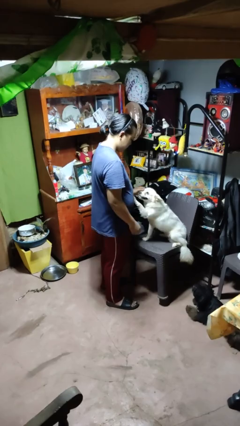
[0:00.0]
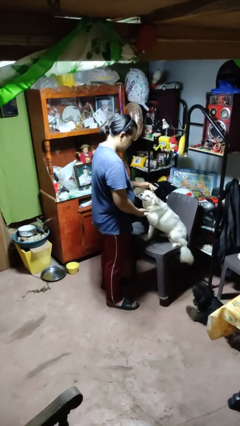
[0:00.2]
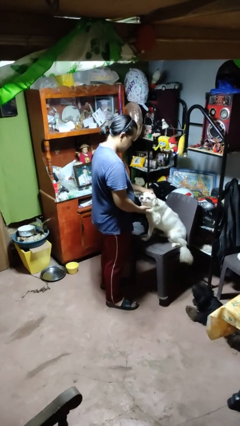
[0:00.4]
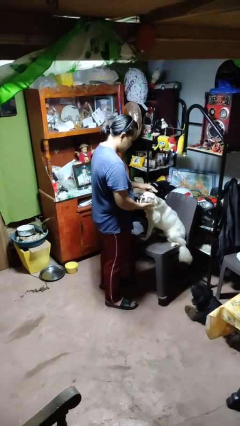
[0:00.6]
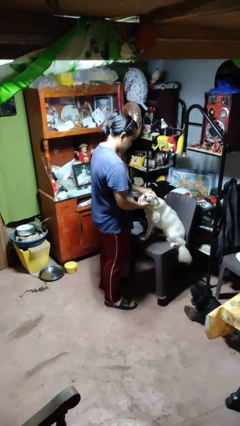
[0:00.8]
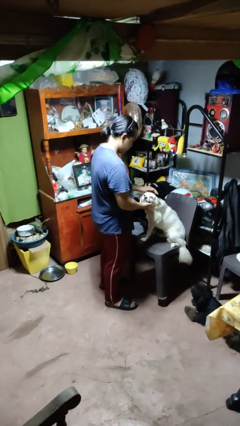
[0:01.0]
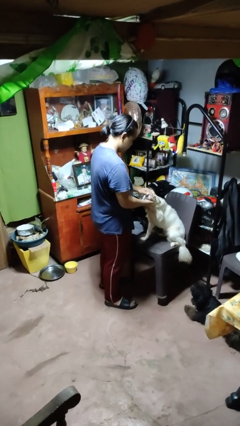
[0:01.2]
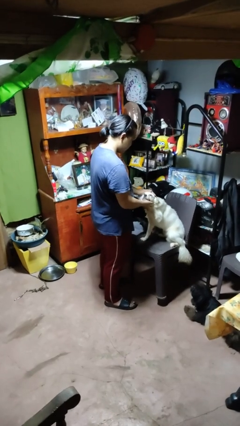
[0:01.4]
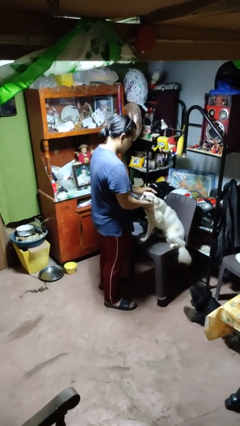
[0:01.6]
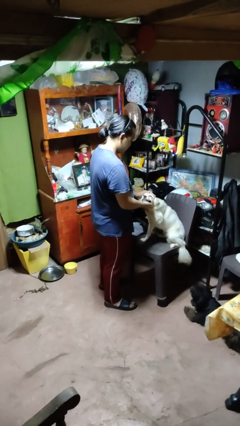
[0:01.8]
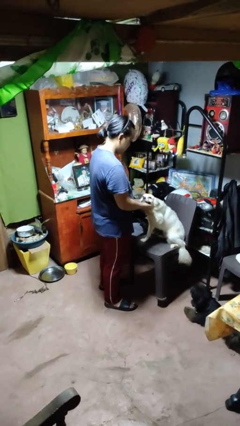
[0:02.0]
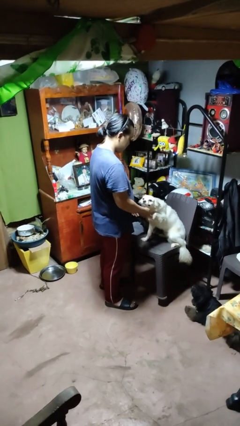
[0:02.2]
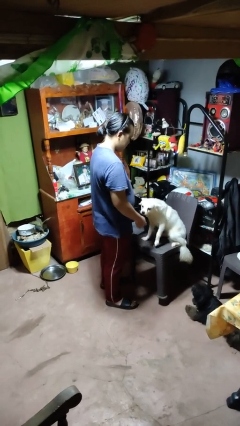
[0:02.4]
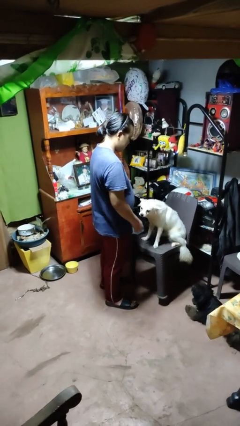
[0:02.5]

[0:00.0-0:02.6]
person pets dog

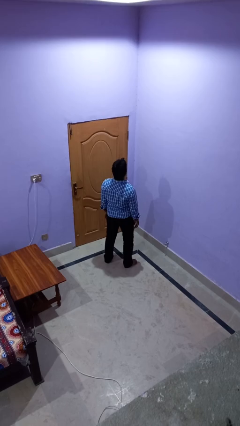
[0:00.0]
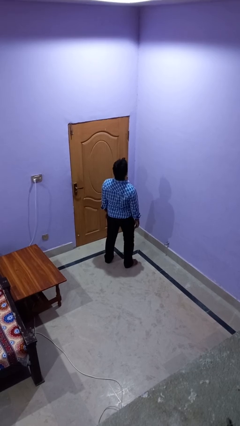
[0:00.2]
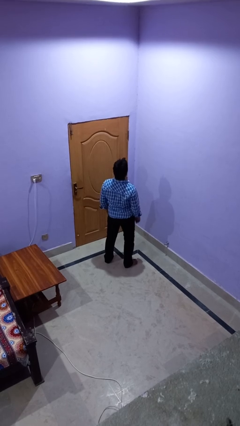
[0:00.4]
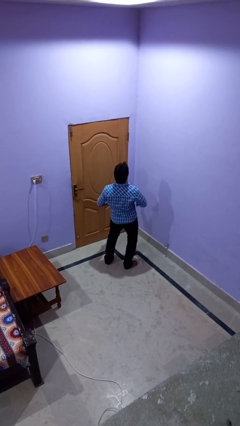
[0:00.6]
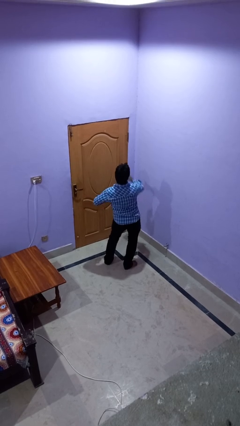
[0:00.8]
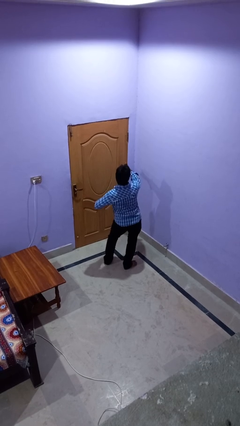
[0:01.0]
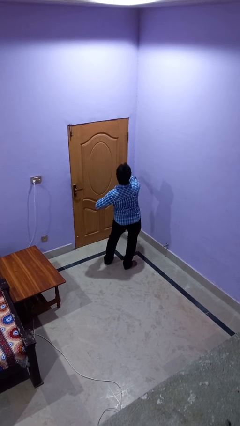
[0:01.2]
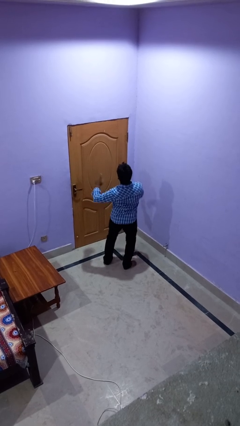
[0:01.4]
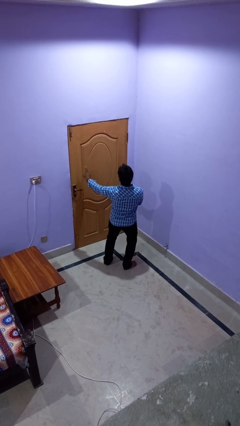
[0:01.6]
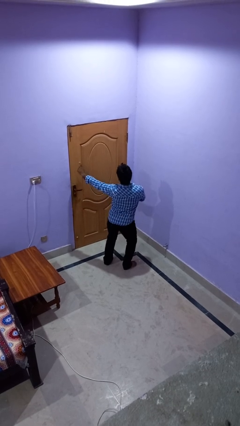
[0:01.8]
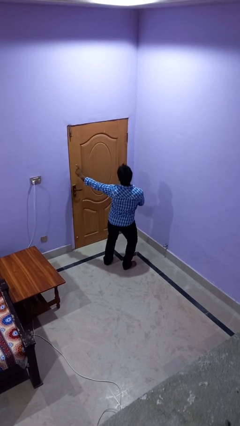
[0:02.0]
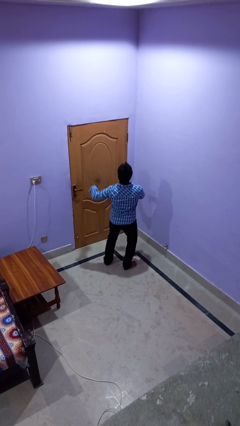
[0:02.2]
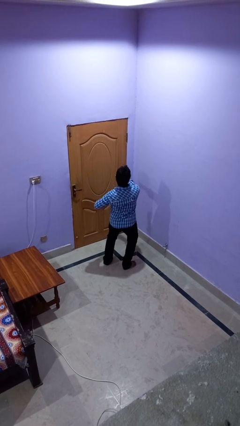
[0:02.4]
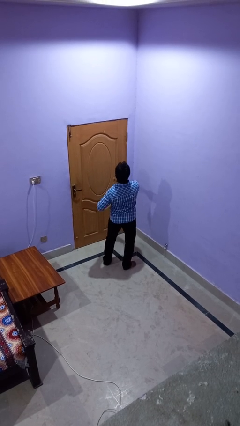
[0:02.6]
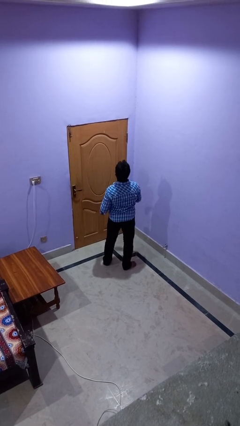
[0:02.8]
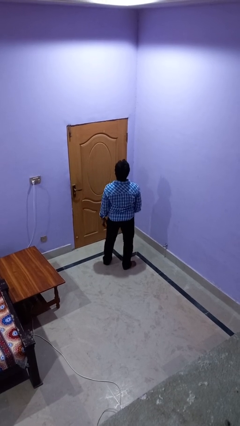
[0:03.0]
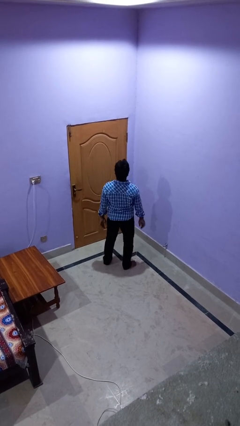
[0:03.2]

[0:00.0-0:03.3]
person dances in place

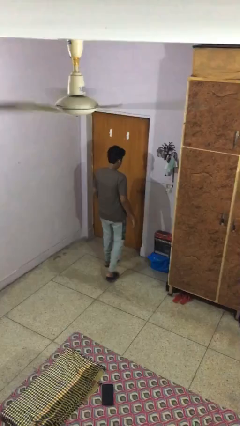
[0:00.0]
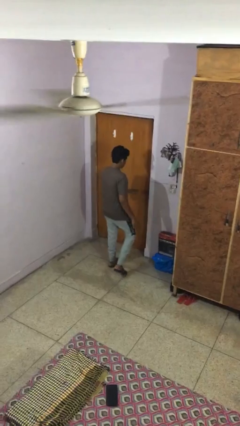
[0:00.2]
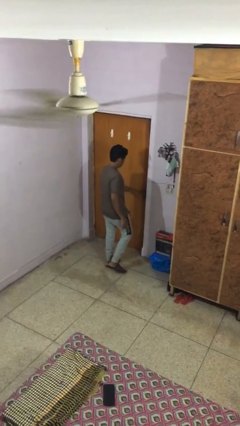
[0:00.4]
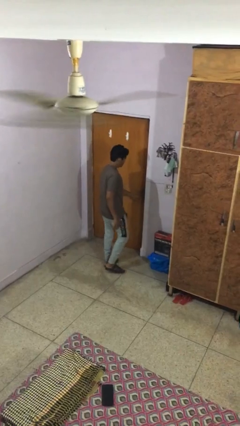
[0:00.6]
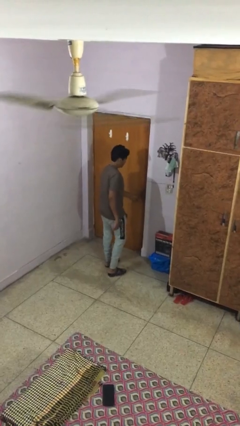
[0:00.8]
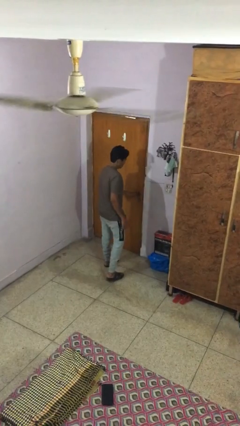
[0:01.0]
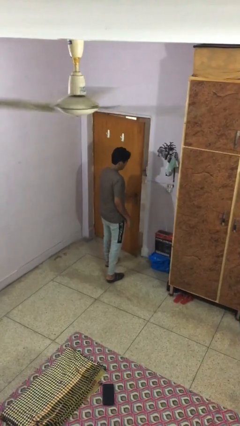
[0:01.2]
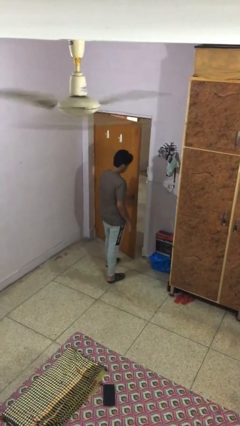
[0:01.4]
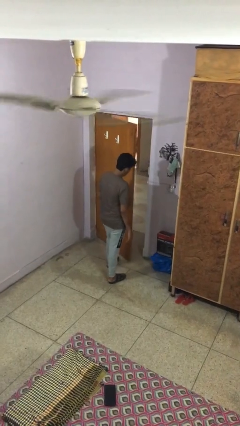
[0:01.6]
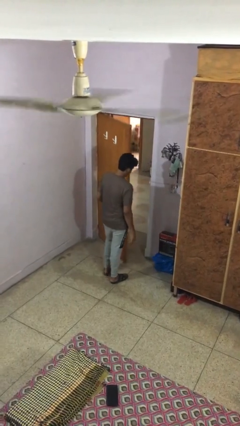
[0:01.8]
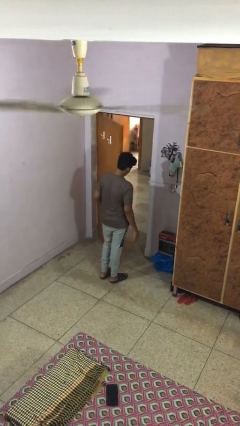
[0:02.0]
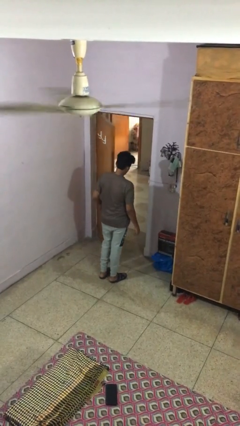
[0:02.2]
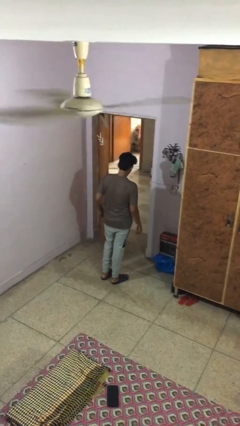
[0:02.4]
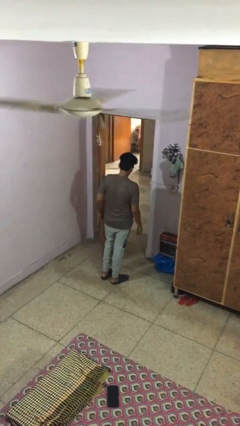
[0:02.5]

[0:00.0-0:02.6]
person opens facility door

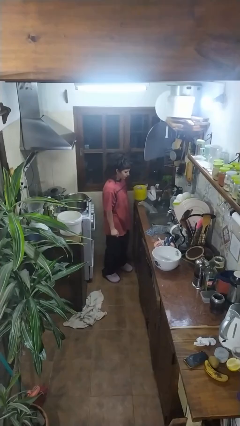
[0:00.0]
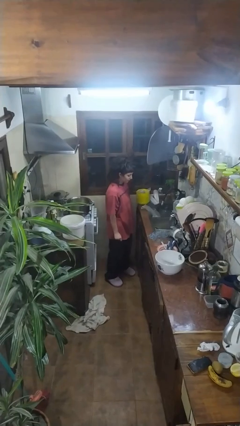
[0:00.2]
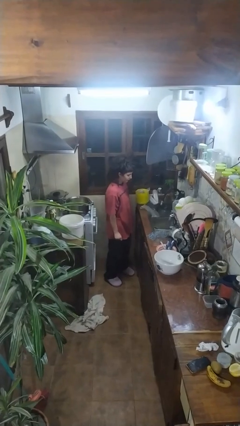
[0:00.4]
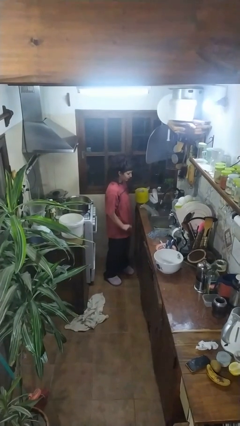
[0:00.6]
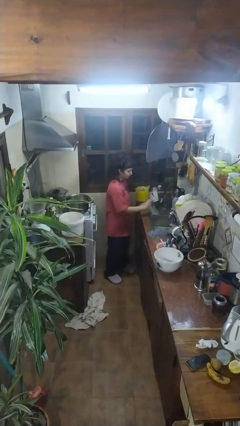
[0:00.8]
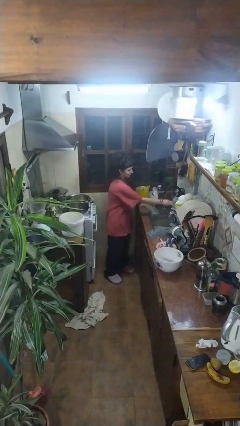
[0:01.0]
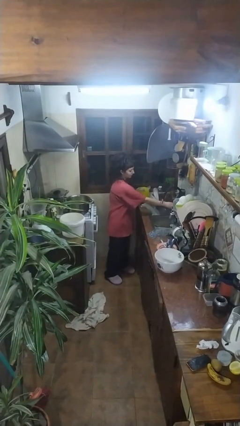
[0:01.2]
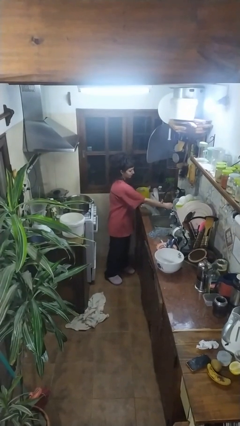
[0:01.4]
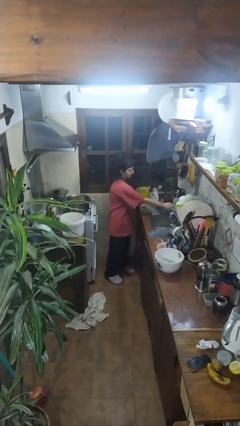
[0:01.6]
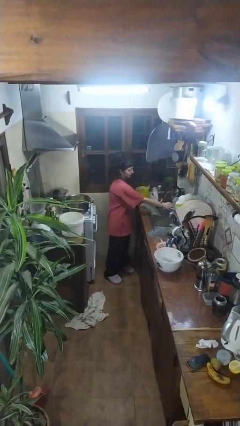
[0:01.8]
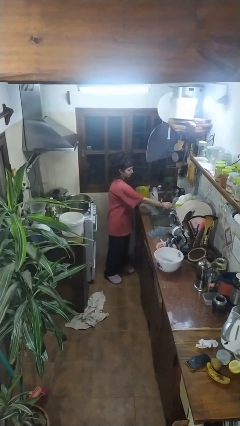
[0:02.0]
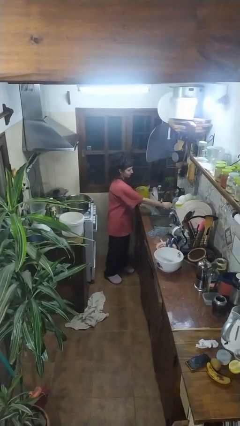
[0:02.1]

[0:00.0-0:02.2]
person turns on faucet

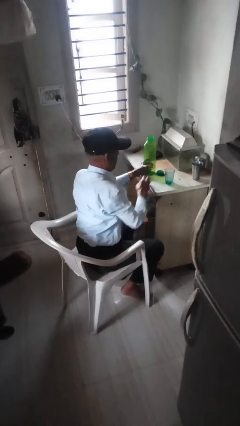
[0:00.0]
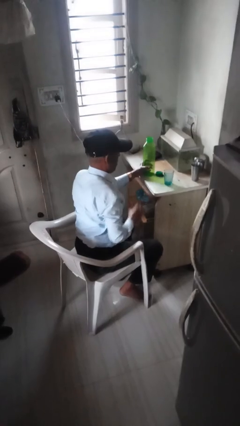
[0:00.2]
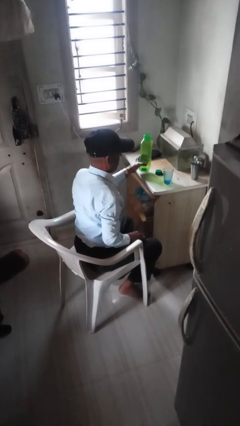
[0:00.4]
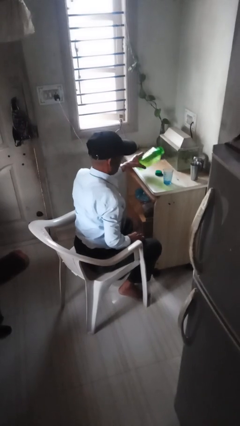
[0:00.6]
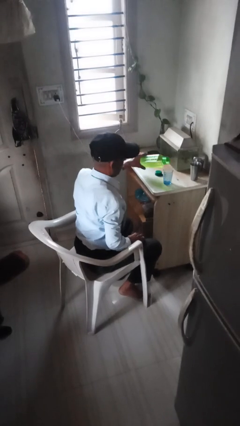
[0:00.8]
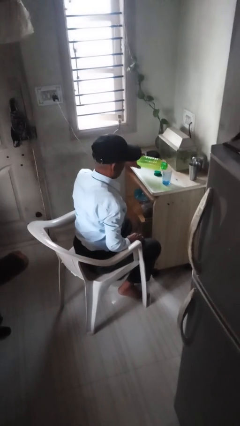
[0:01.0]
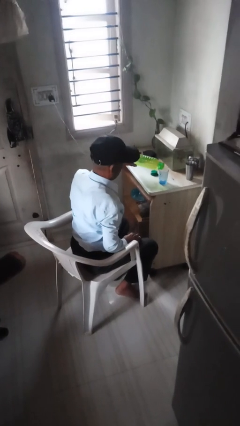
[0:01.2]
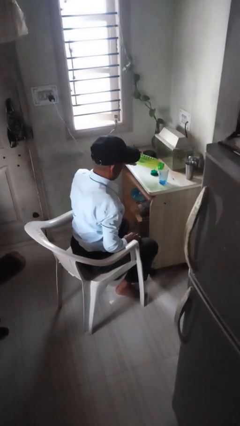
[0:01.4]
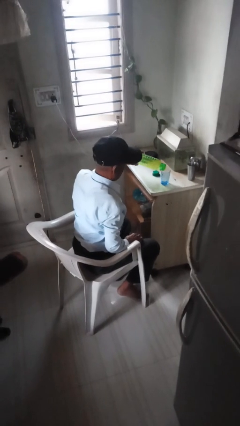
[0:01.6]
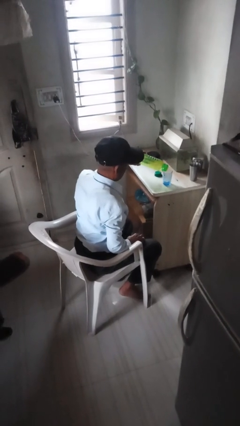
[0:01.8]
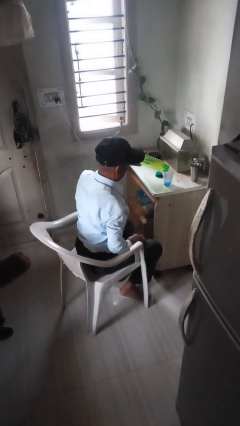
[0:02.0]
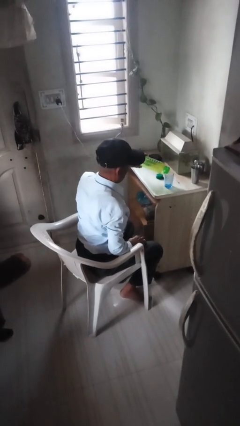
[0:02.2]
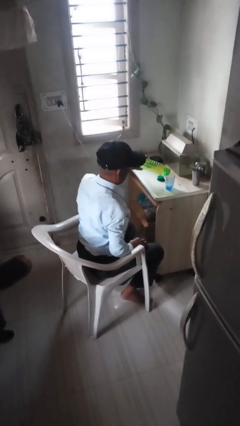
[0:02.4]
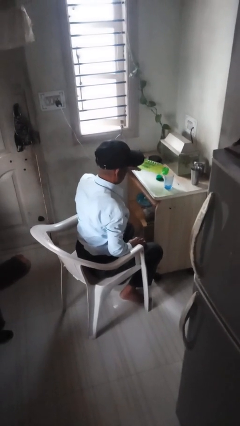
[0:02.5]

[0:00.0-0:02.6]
person pours liquid into cup

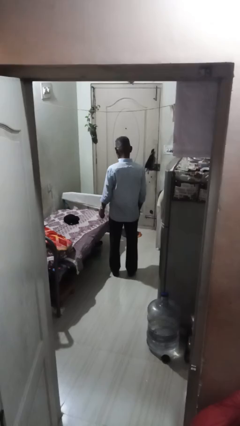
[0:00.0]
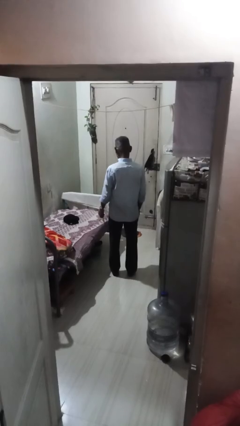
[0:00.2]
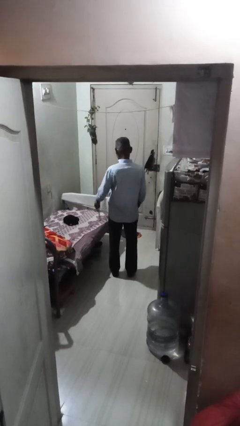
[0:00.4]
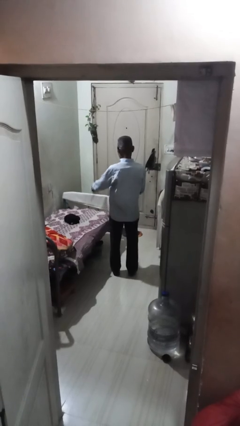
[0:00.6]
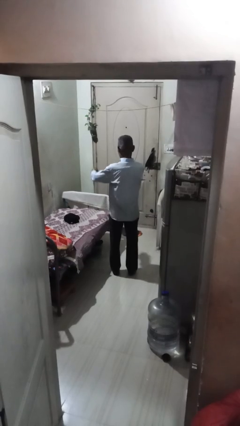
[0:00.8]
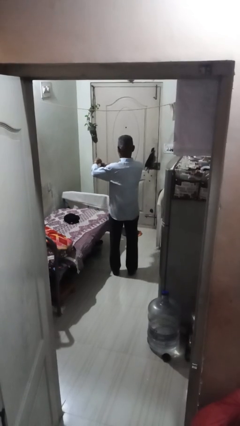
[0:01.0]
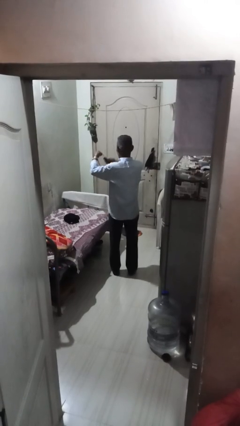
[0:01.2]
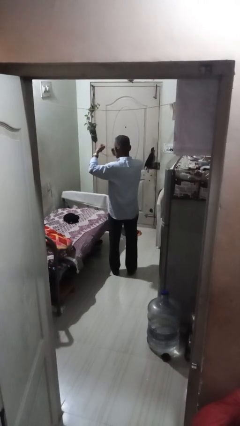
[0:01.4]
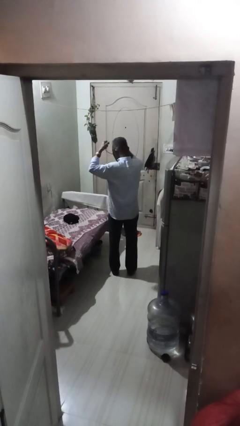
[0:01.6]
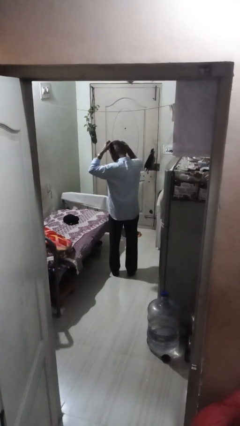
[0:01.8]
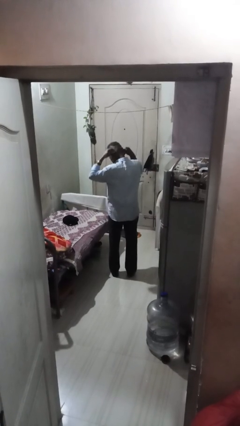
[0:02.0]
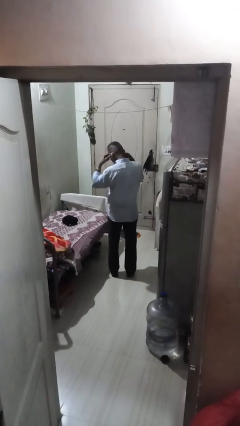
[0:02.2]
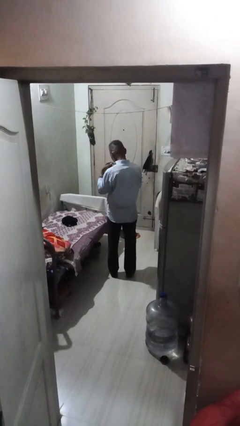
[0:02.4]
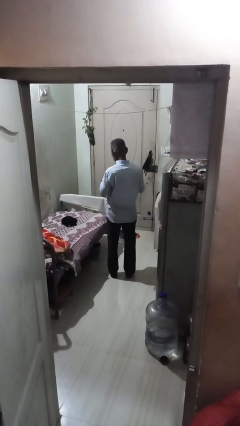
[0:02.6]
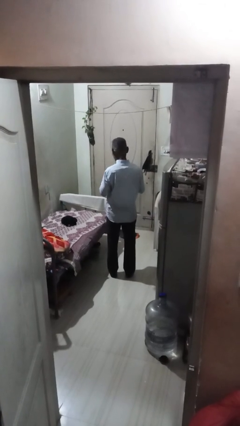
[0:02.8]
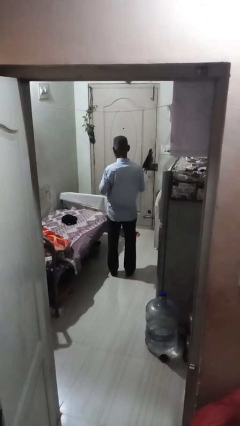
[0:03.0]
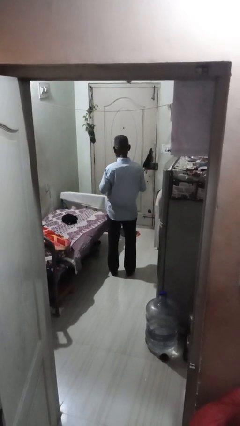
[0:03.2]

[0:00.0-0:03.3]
person puts on necklace

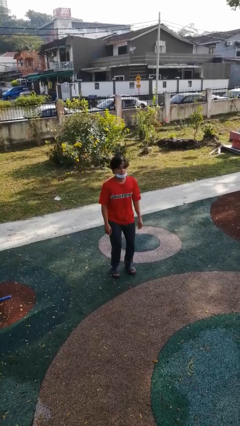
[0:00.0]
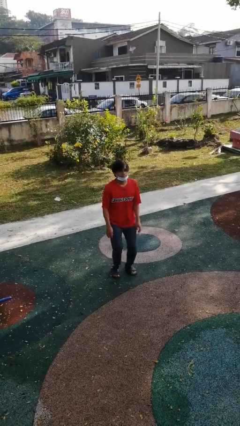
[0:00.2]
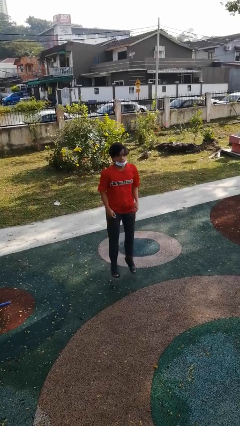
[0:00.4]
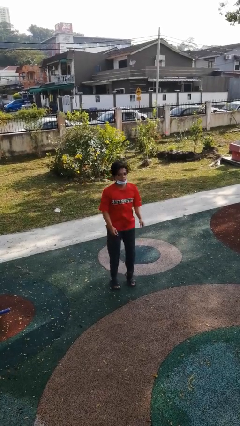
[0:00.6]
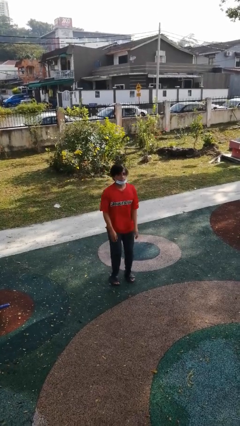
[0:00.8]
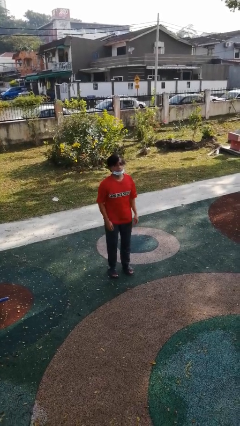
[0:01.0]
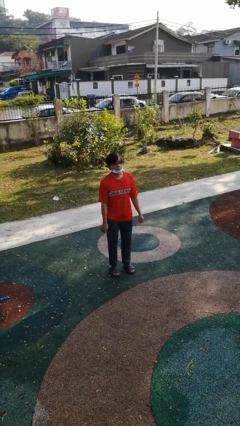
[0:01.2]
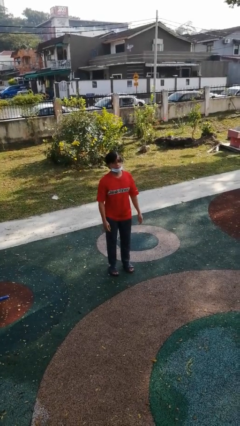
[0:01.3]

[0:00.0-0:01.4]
person jumps
